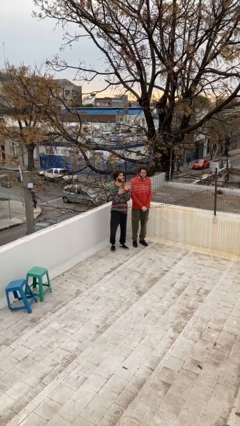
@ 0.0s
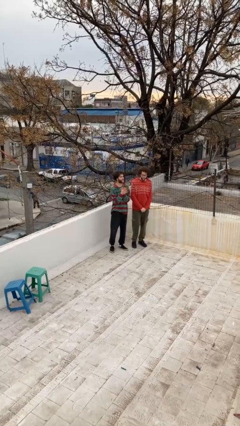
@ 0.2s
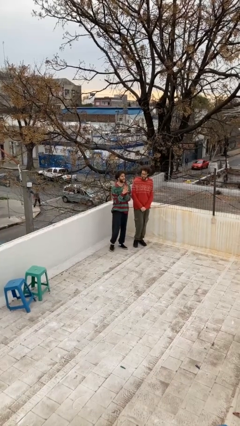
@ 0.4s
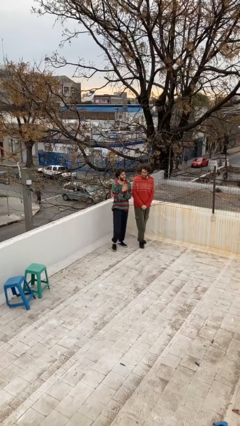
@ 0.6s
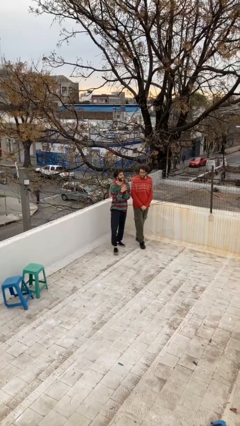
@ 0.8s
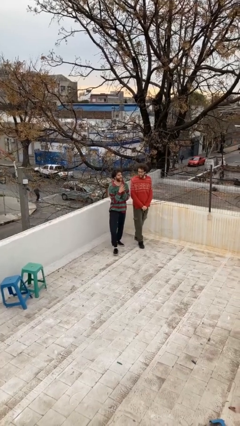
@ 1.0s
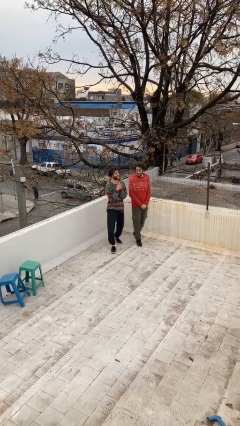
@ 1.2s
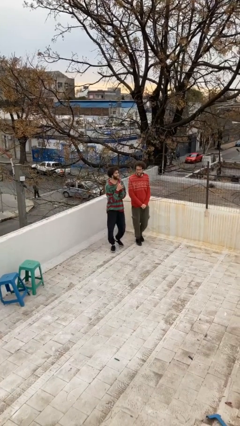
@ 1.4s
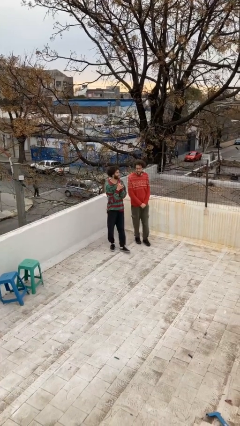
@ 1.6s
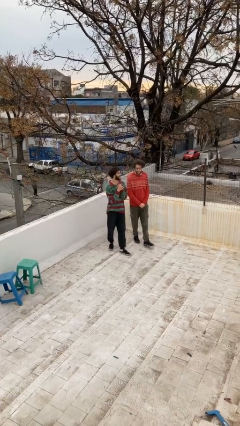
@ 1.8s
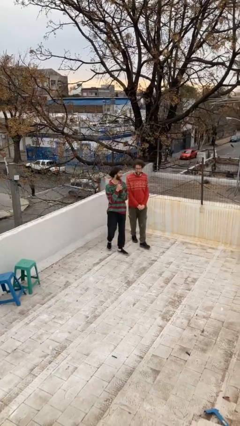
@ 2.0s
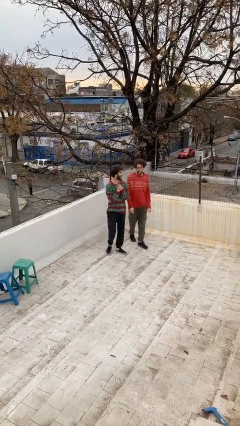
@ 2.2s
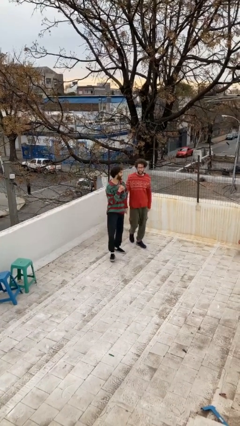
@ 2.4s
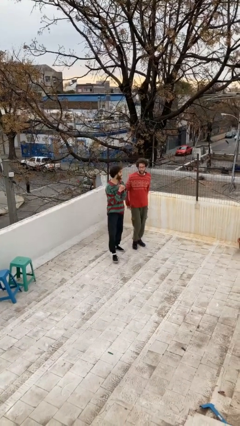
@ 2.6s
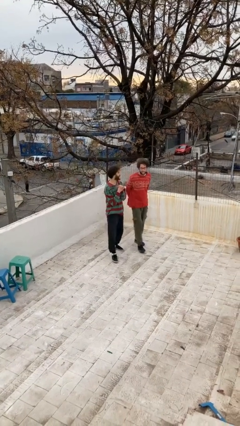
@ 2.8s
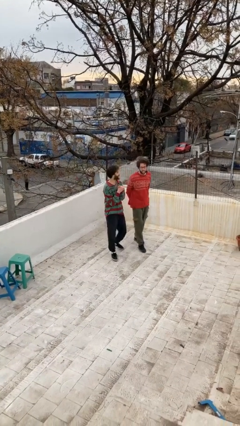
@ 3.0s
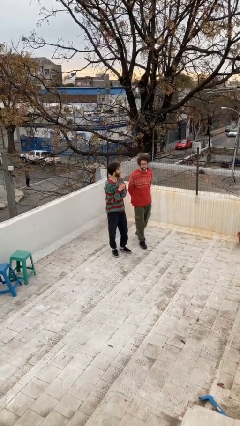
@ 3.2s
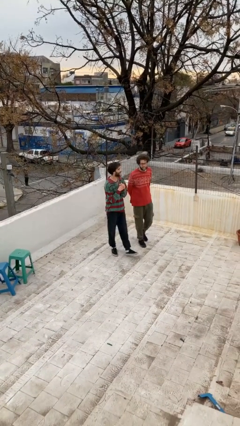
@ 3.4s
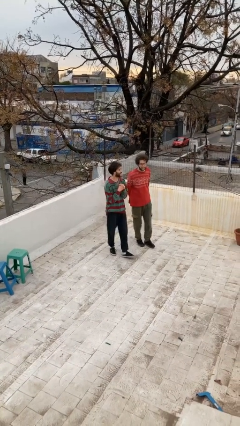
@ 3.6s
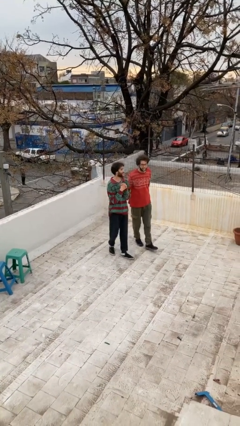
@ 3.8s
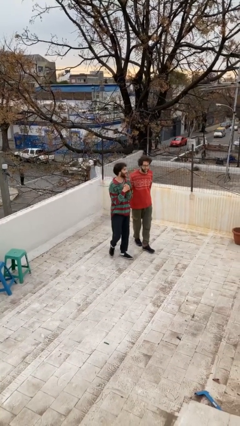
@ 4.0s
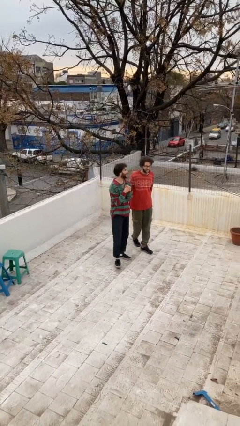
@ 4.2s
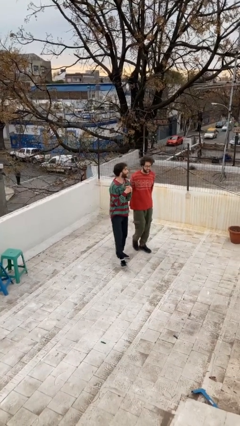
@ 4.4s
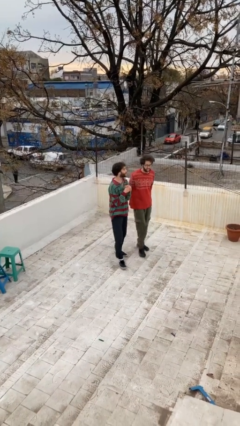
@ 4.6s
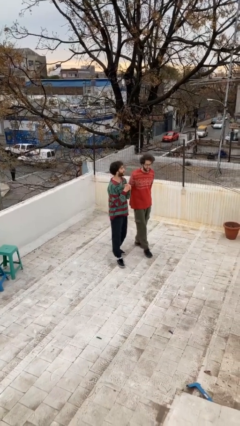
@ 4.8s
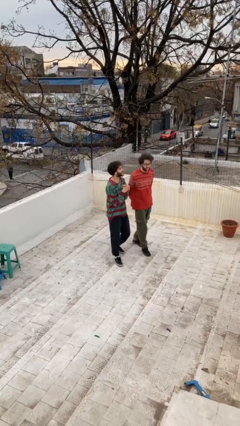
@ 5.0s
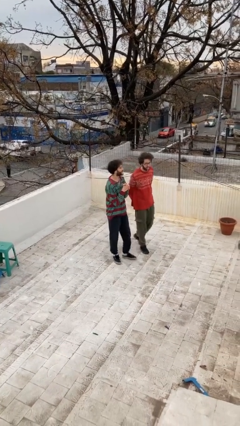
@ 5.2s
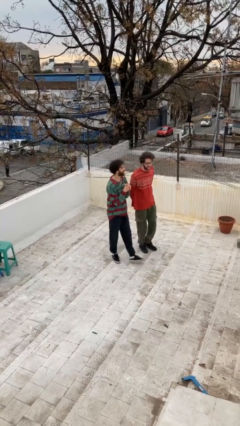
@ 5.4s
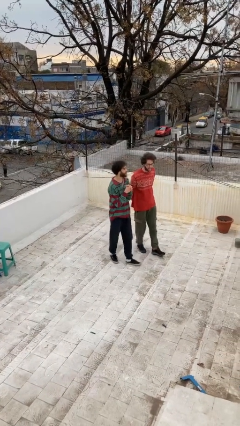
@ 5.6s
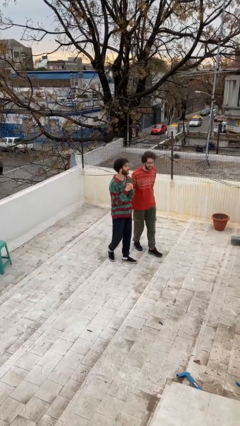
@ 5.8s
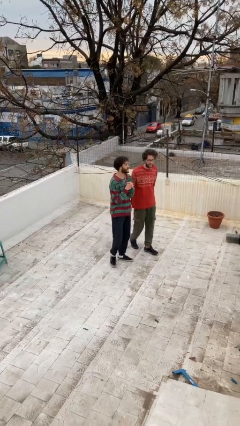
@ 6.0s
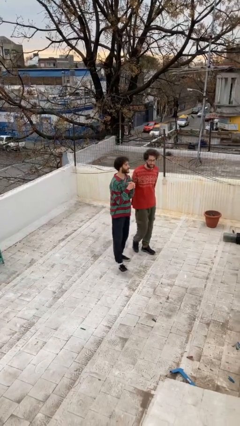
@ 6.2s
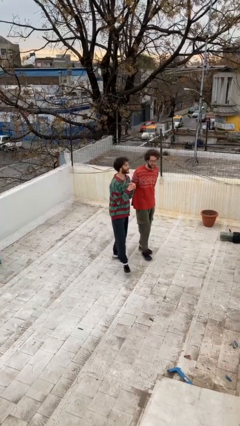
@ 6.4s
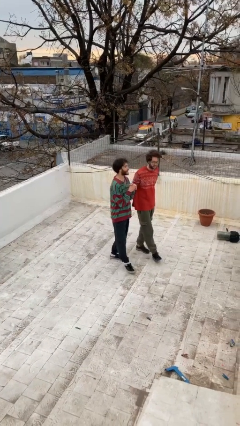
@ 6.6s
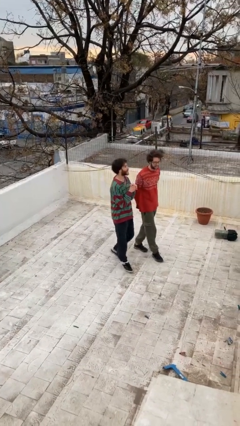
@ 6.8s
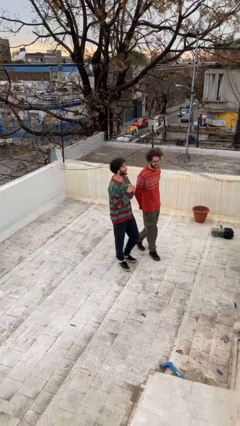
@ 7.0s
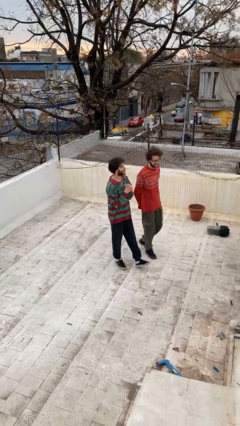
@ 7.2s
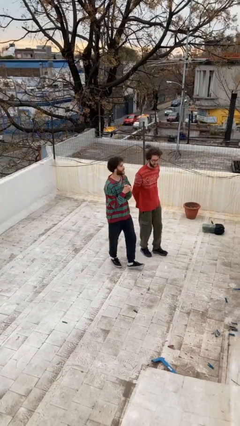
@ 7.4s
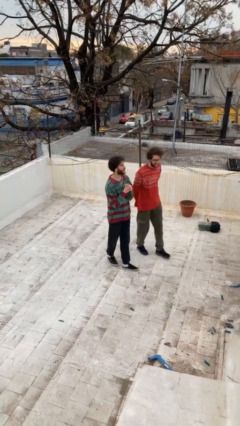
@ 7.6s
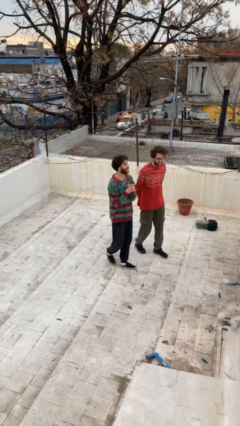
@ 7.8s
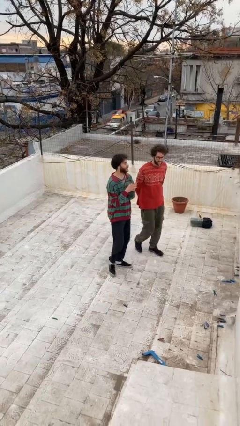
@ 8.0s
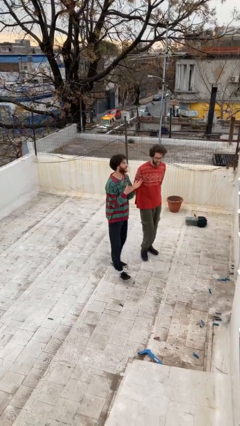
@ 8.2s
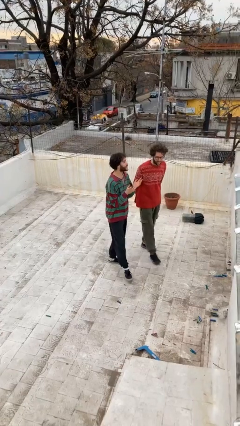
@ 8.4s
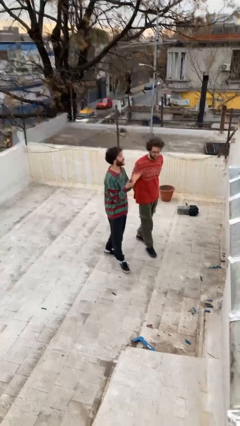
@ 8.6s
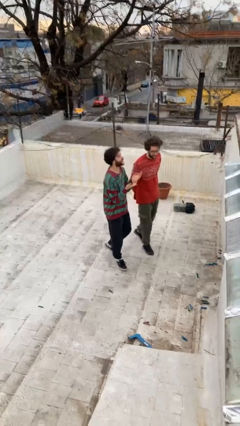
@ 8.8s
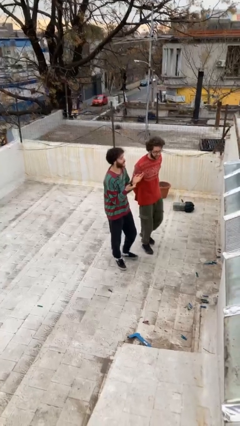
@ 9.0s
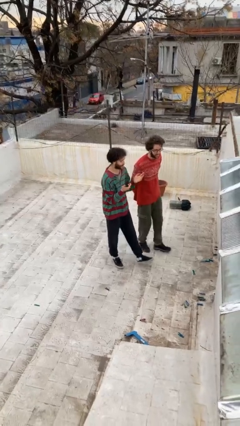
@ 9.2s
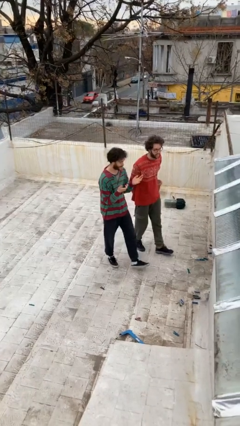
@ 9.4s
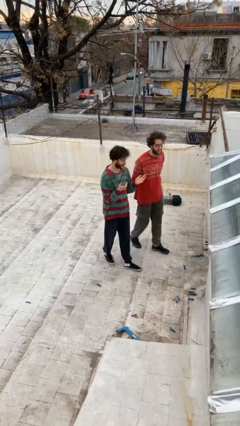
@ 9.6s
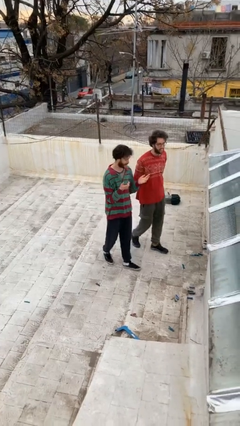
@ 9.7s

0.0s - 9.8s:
person talks to person

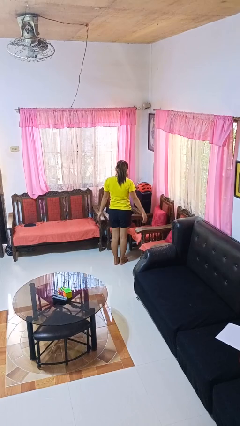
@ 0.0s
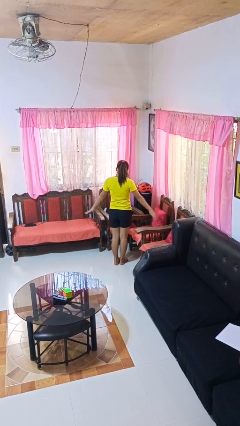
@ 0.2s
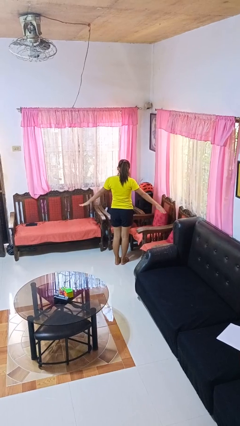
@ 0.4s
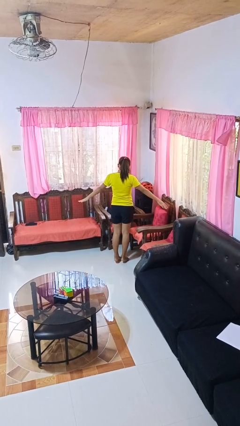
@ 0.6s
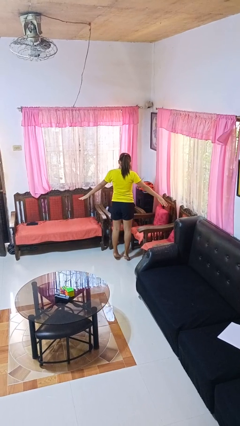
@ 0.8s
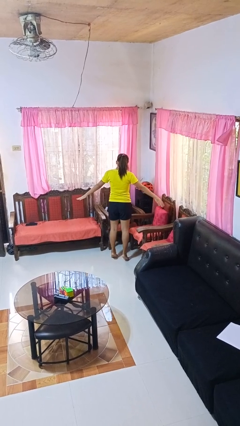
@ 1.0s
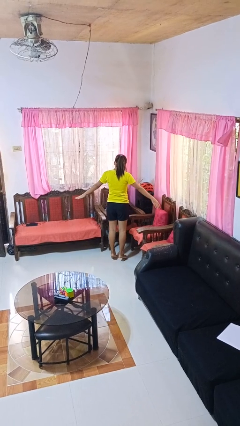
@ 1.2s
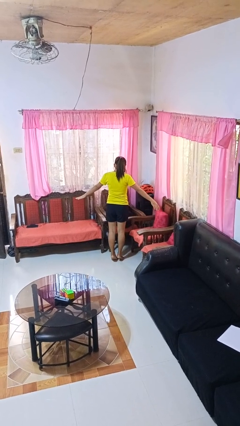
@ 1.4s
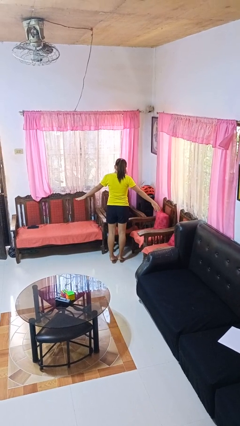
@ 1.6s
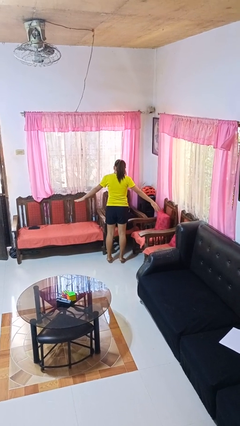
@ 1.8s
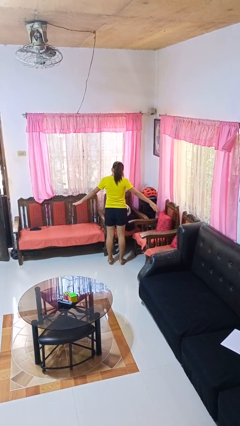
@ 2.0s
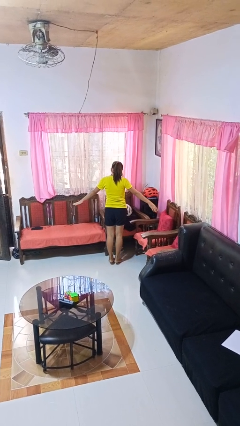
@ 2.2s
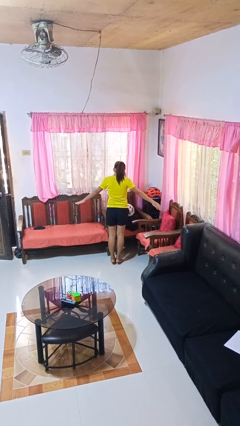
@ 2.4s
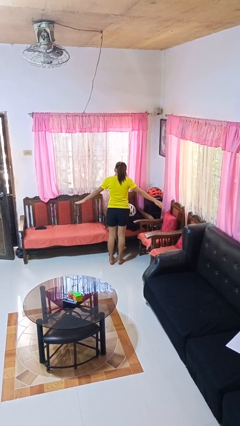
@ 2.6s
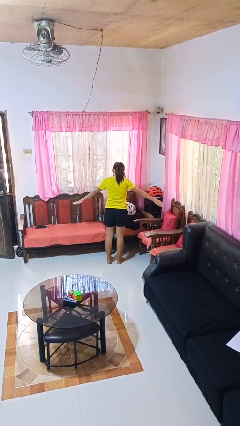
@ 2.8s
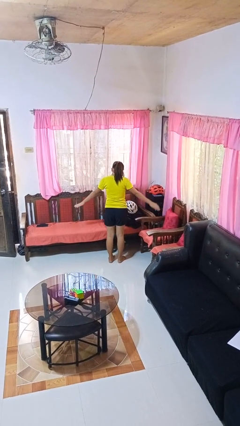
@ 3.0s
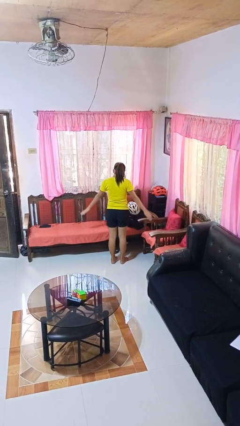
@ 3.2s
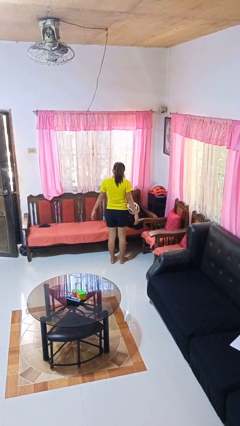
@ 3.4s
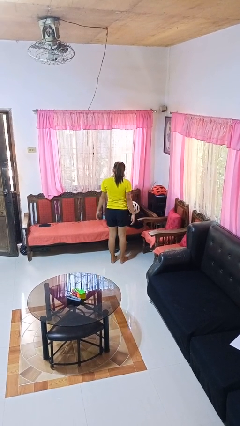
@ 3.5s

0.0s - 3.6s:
person walks tiptoe

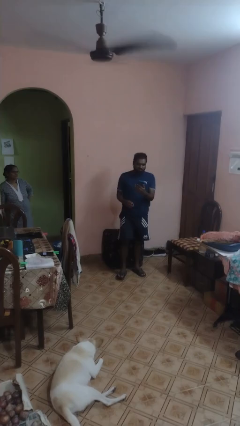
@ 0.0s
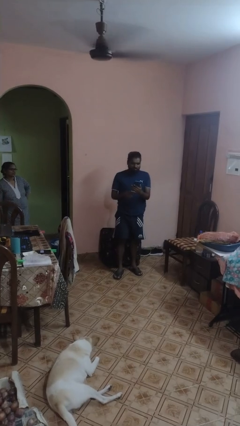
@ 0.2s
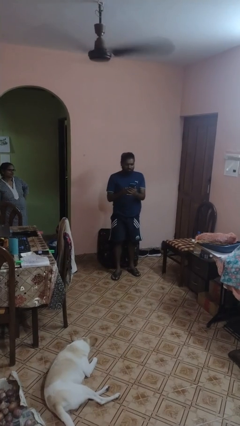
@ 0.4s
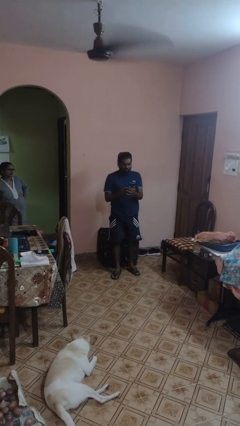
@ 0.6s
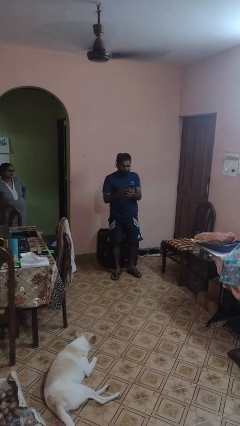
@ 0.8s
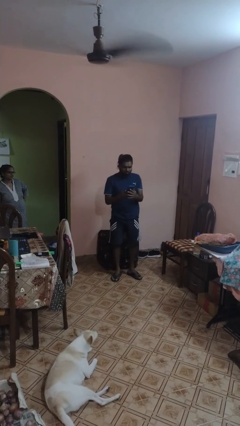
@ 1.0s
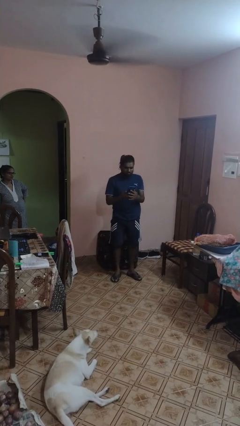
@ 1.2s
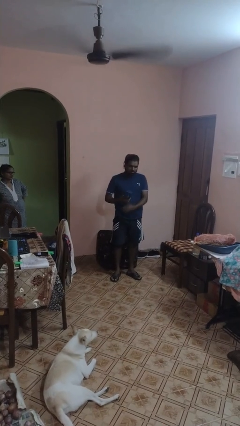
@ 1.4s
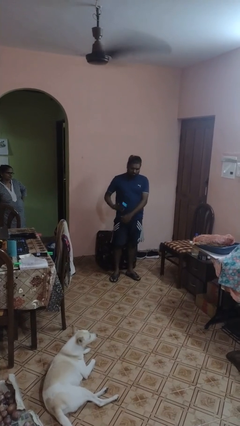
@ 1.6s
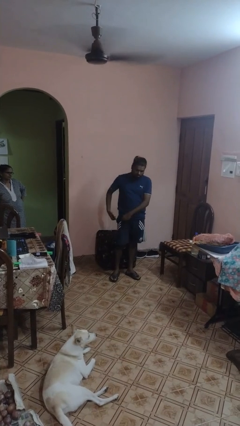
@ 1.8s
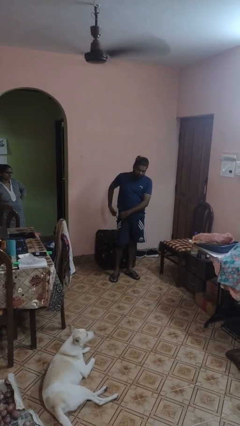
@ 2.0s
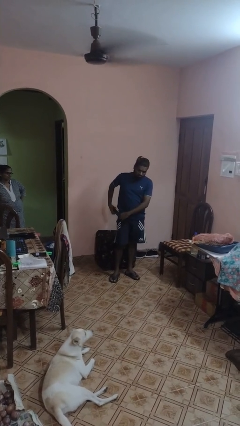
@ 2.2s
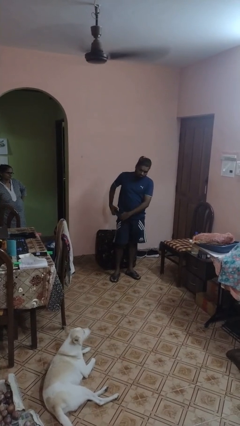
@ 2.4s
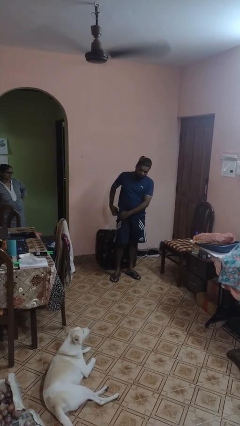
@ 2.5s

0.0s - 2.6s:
person takes phone from pocket

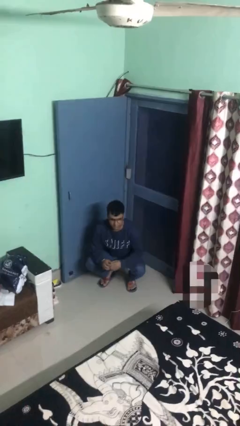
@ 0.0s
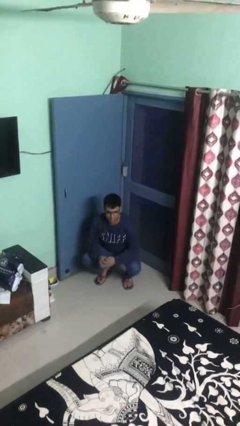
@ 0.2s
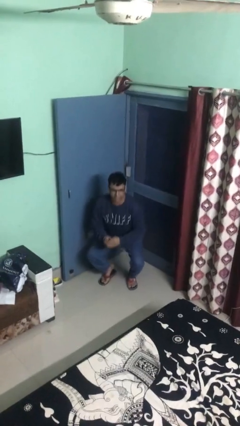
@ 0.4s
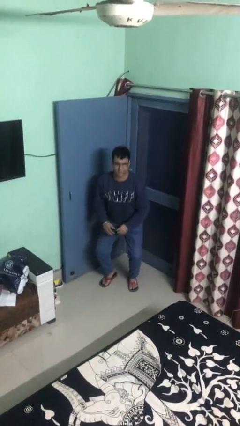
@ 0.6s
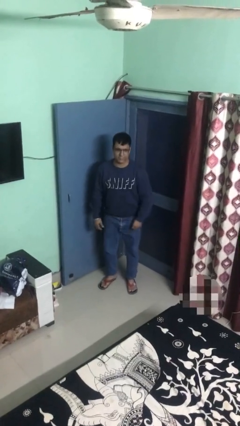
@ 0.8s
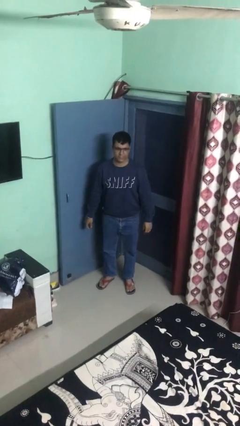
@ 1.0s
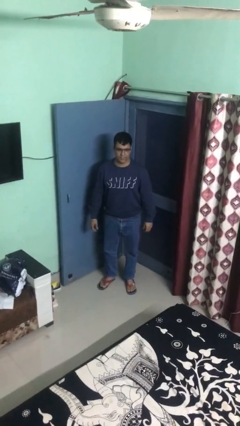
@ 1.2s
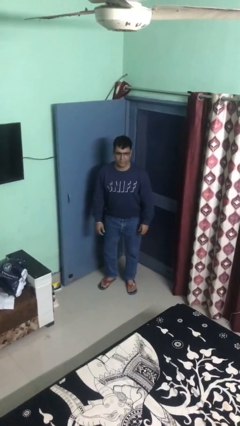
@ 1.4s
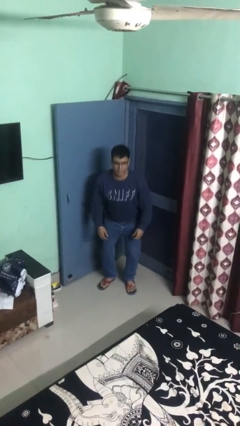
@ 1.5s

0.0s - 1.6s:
person stands up
